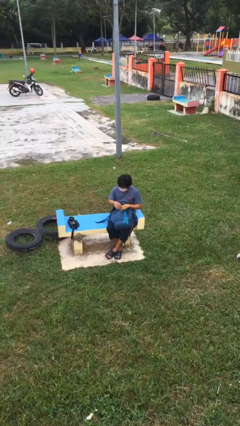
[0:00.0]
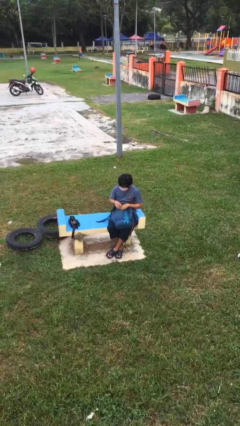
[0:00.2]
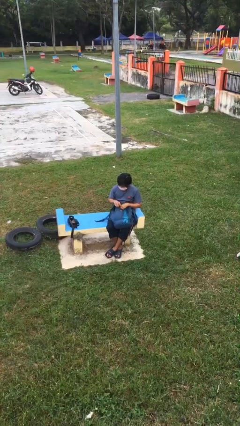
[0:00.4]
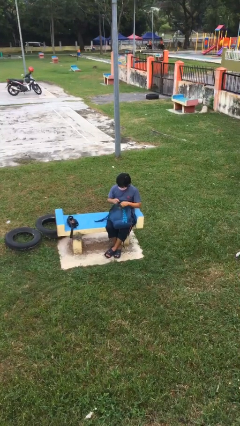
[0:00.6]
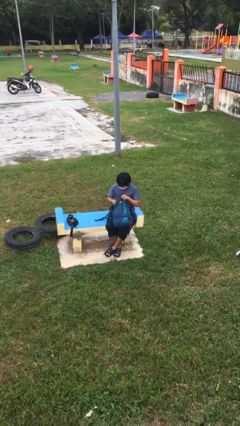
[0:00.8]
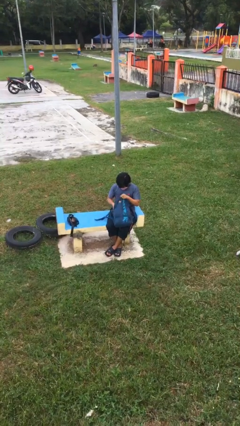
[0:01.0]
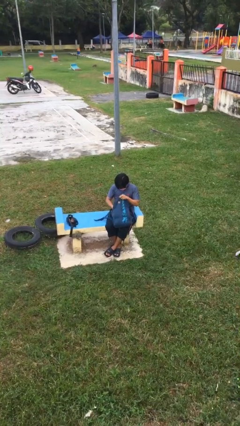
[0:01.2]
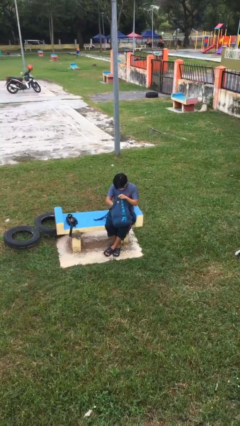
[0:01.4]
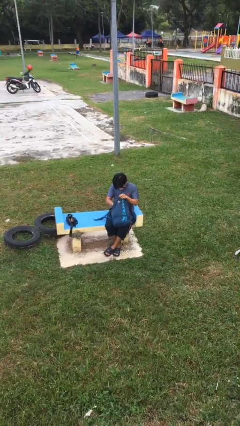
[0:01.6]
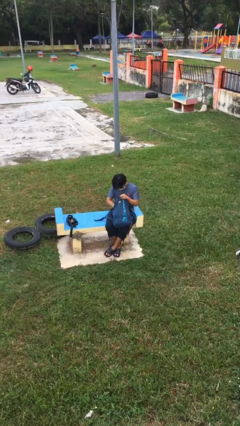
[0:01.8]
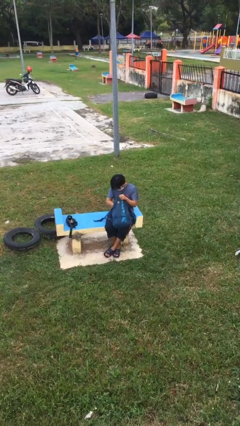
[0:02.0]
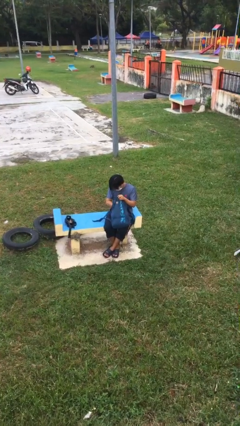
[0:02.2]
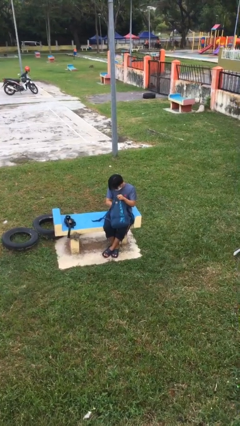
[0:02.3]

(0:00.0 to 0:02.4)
person searches in backpack

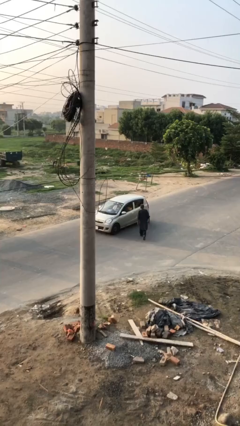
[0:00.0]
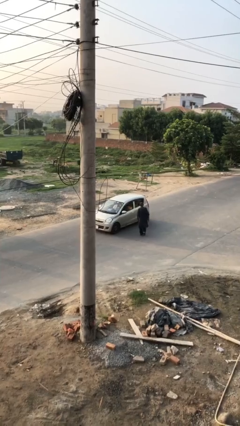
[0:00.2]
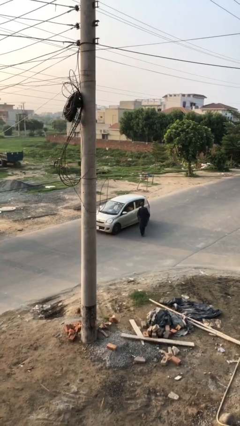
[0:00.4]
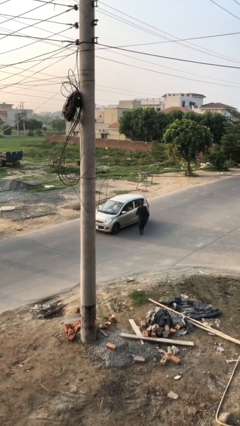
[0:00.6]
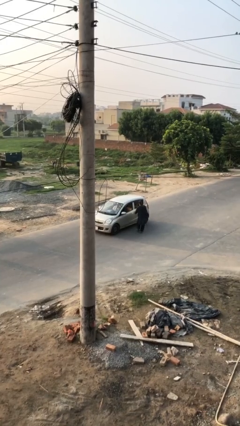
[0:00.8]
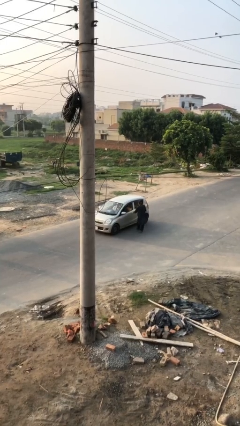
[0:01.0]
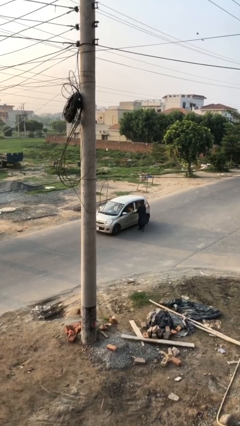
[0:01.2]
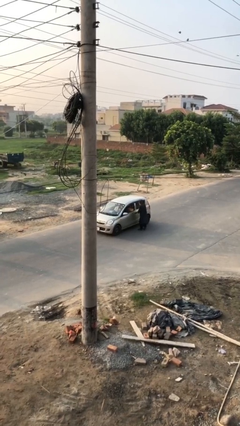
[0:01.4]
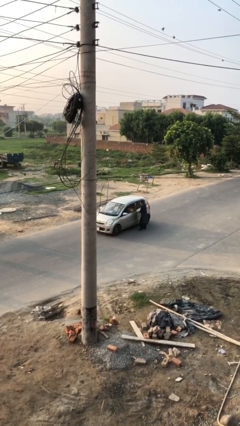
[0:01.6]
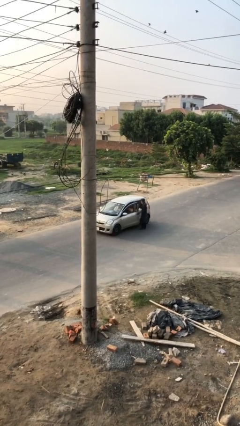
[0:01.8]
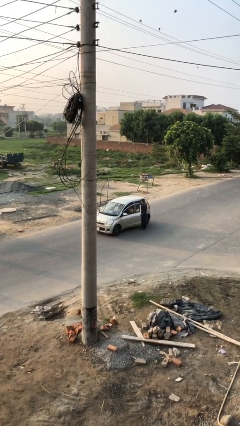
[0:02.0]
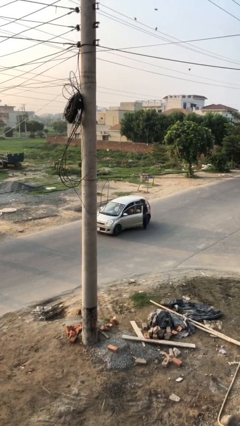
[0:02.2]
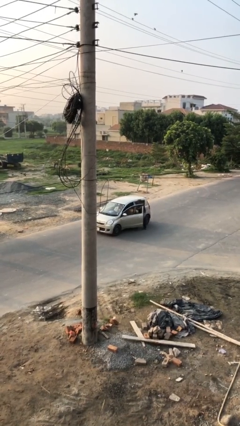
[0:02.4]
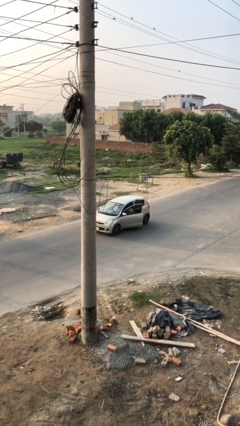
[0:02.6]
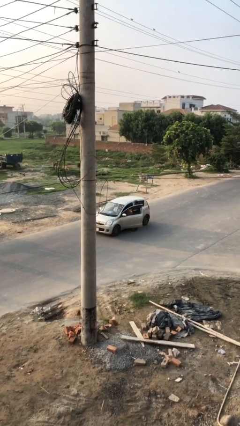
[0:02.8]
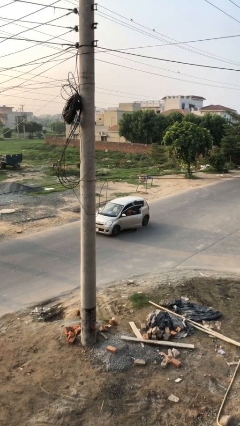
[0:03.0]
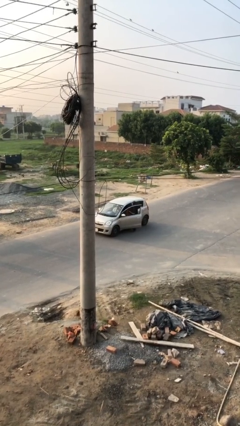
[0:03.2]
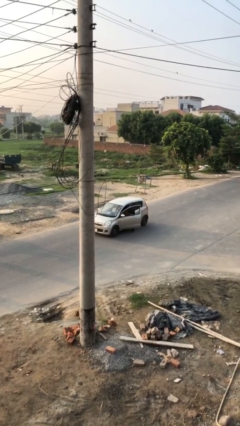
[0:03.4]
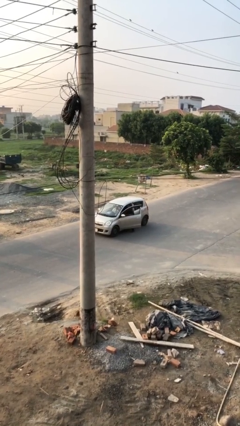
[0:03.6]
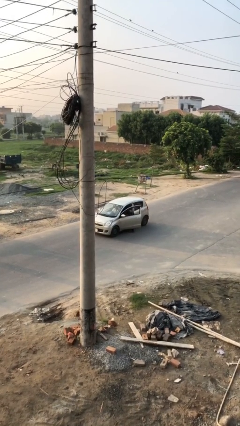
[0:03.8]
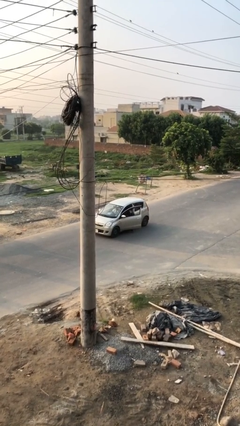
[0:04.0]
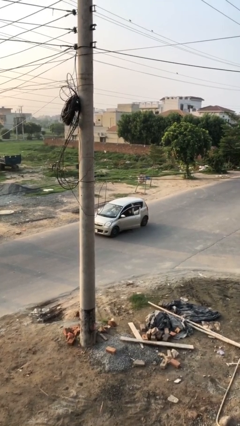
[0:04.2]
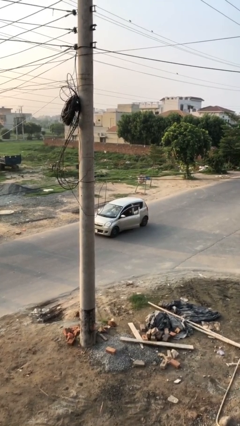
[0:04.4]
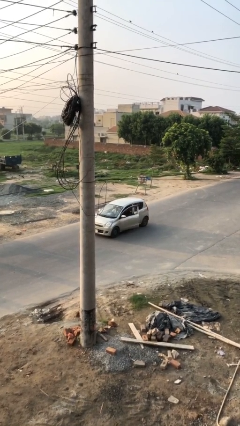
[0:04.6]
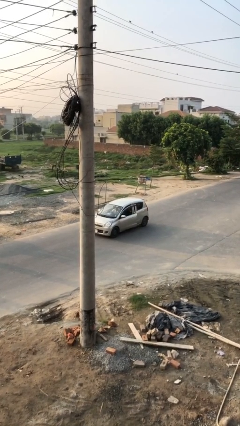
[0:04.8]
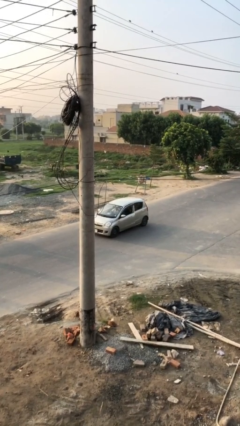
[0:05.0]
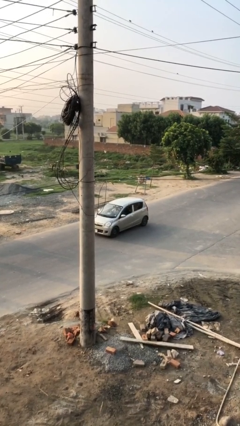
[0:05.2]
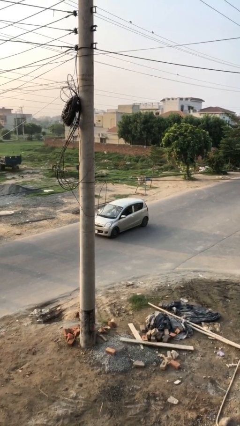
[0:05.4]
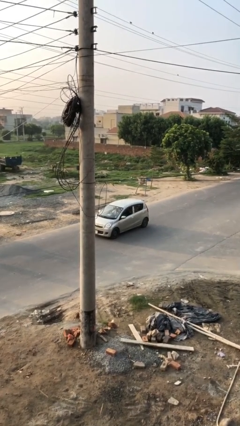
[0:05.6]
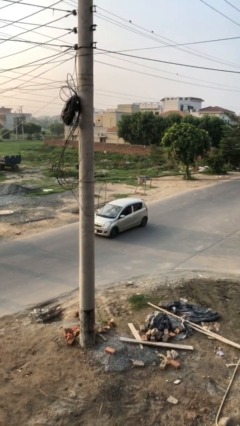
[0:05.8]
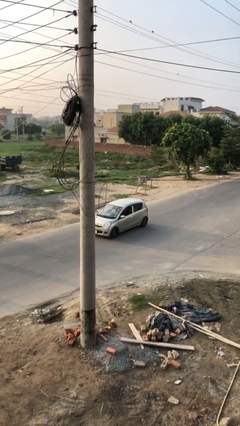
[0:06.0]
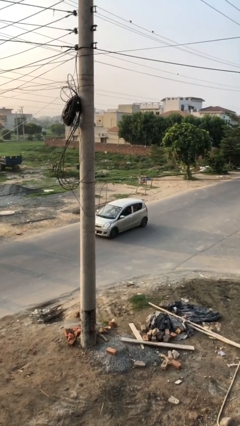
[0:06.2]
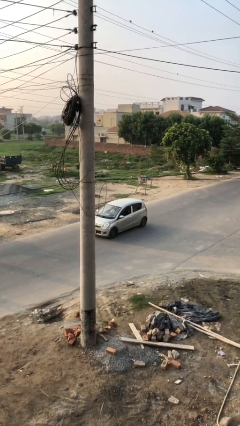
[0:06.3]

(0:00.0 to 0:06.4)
car picks up person

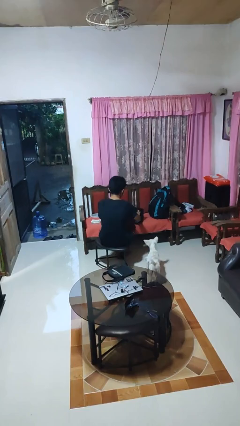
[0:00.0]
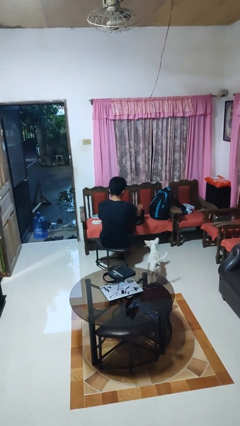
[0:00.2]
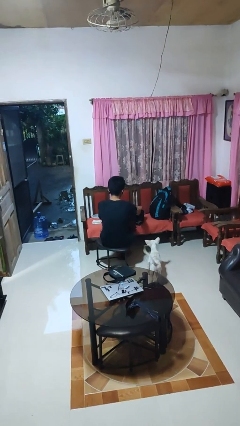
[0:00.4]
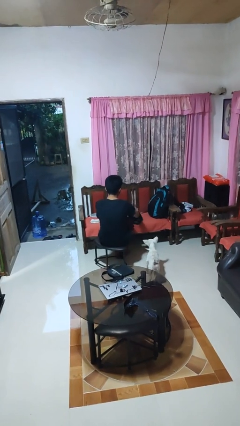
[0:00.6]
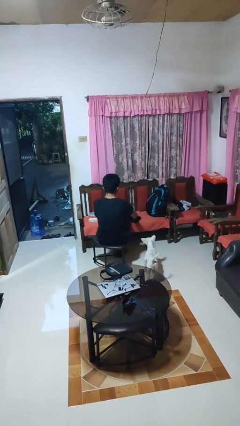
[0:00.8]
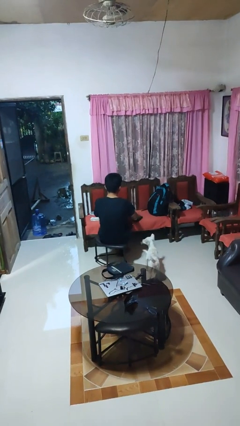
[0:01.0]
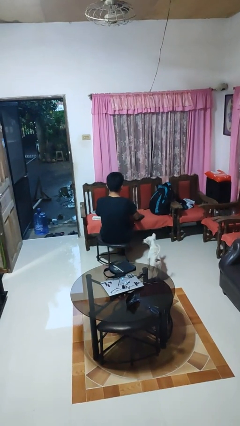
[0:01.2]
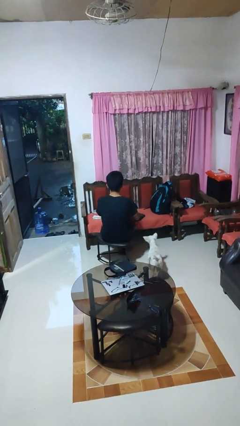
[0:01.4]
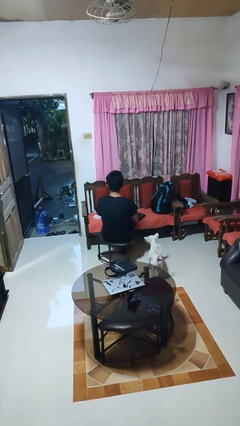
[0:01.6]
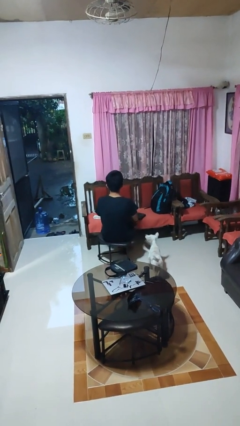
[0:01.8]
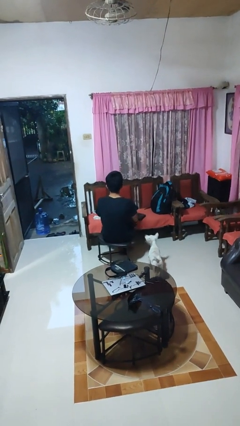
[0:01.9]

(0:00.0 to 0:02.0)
person closes laptop

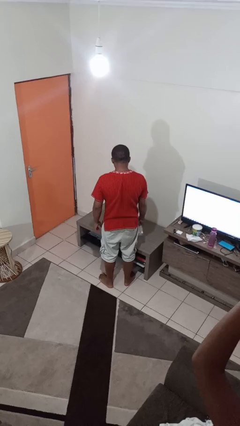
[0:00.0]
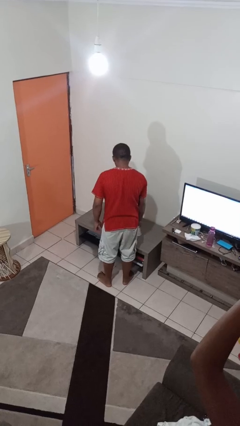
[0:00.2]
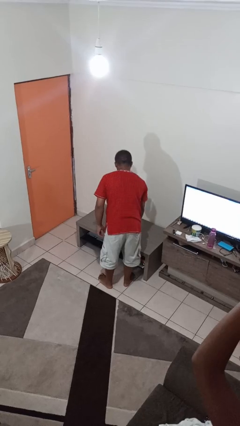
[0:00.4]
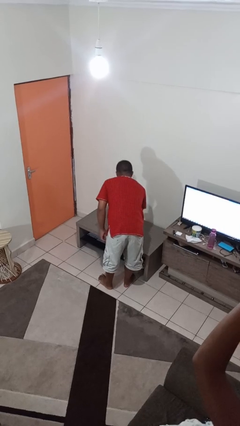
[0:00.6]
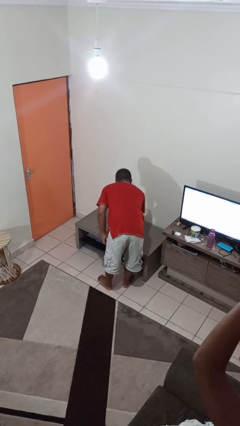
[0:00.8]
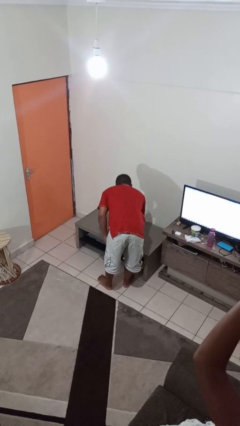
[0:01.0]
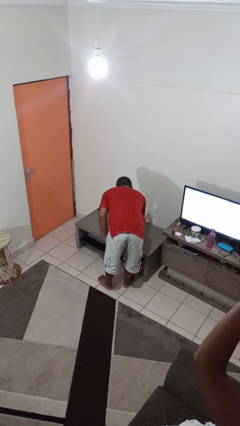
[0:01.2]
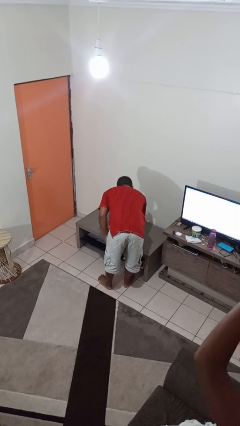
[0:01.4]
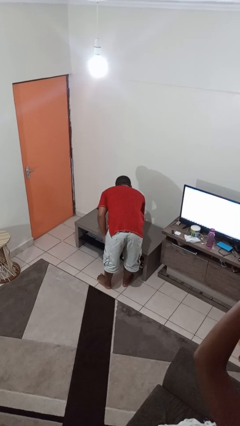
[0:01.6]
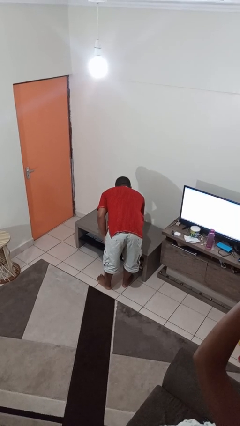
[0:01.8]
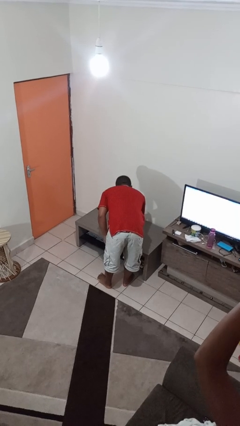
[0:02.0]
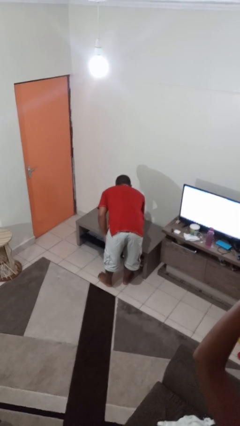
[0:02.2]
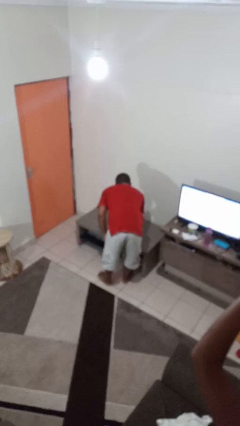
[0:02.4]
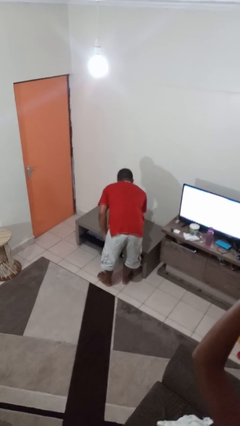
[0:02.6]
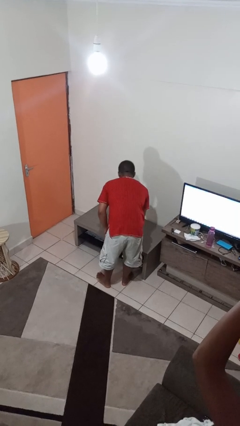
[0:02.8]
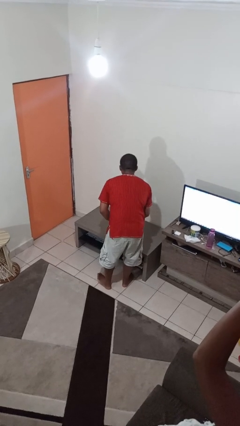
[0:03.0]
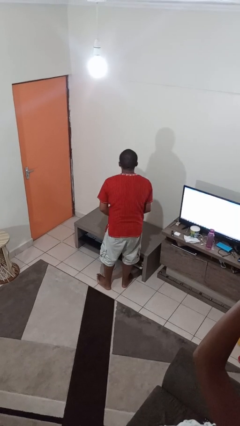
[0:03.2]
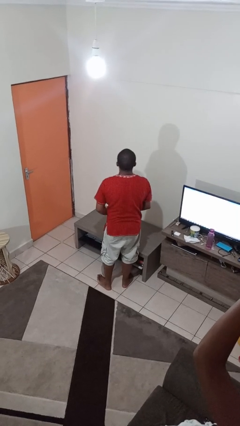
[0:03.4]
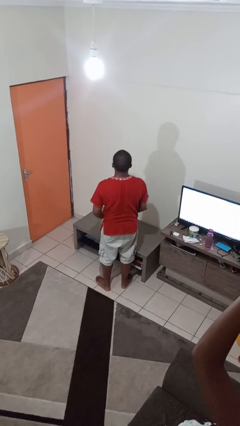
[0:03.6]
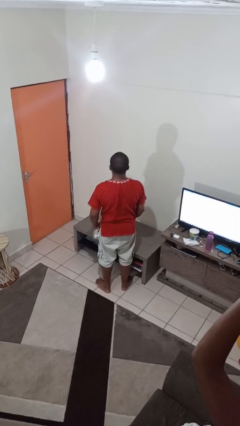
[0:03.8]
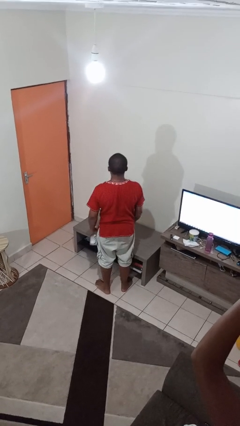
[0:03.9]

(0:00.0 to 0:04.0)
person sprays from bottle

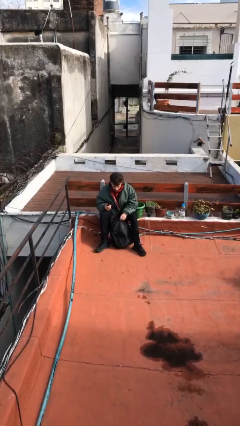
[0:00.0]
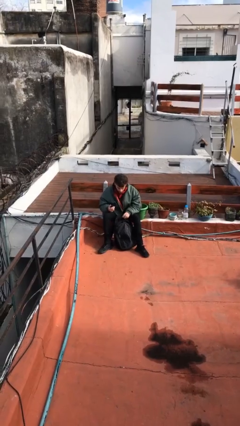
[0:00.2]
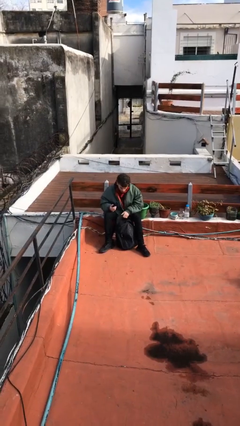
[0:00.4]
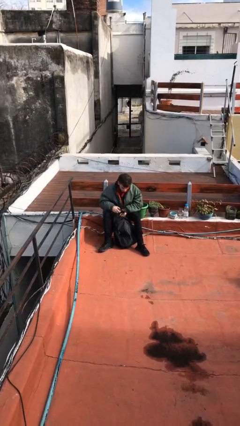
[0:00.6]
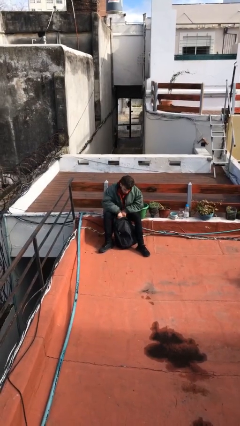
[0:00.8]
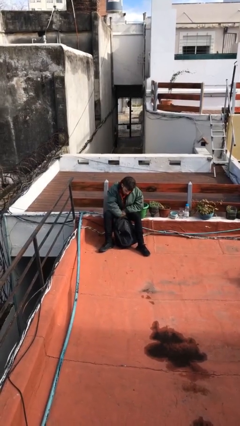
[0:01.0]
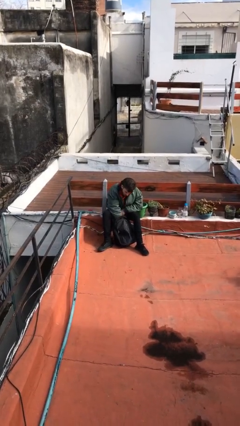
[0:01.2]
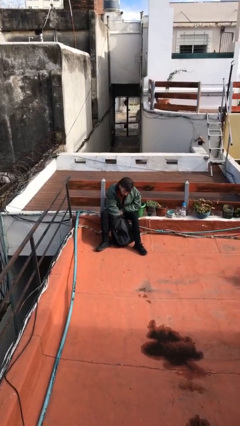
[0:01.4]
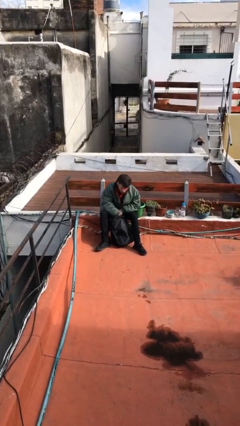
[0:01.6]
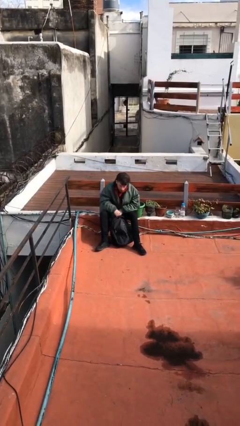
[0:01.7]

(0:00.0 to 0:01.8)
person puts object into backpack

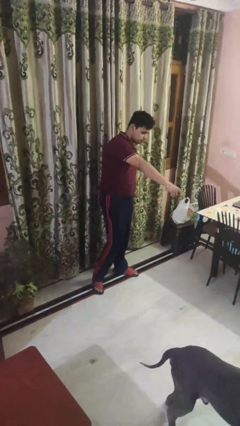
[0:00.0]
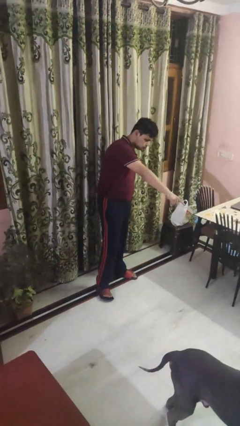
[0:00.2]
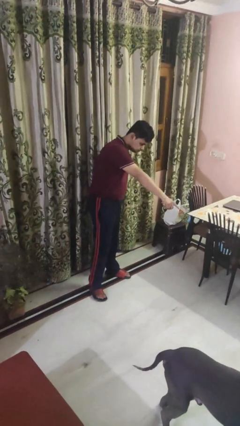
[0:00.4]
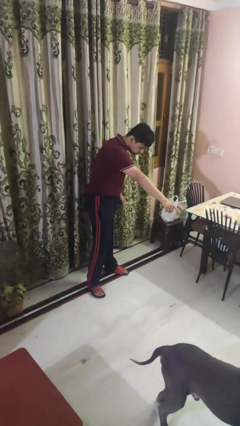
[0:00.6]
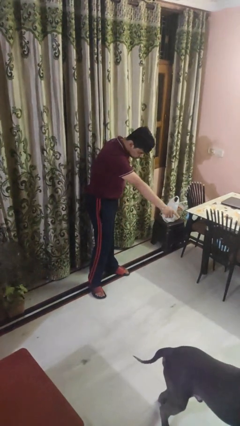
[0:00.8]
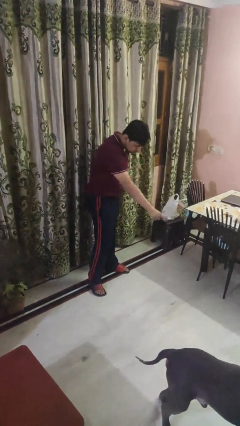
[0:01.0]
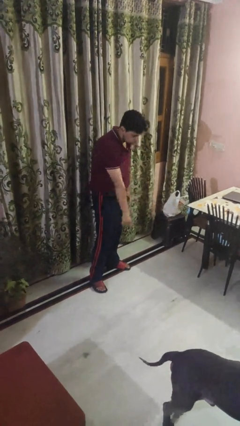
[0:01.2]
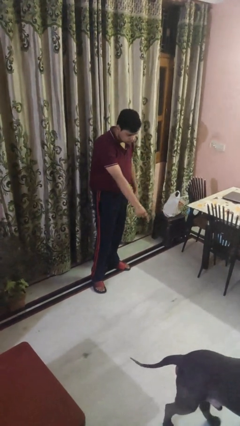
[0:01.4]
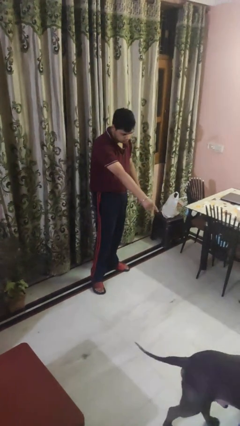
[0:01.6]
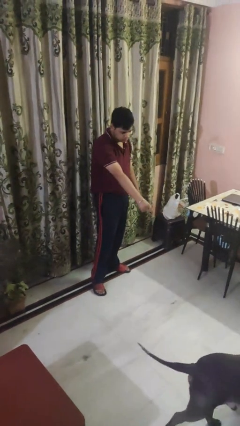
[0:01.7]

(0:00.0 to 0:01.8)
person points to dog
